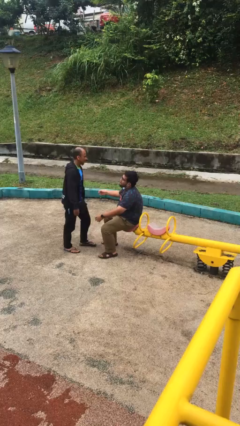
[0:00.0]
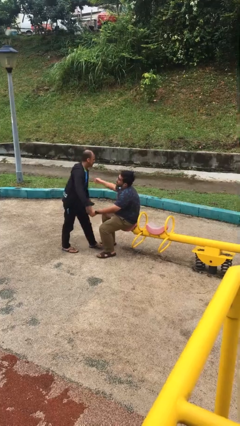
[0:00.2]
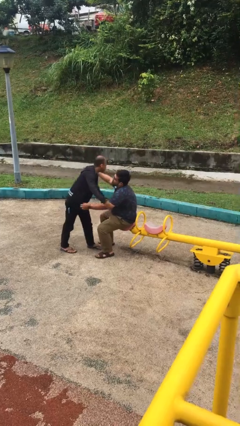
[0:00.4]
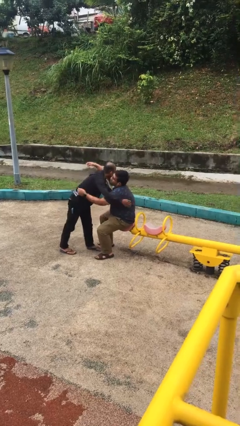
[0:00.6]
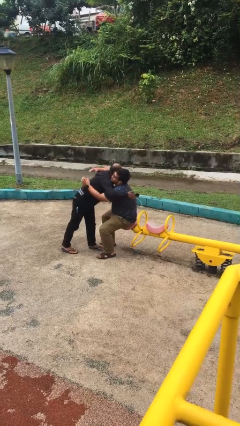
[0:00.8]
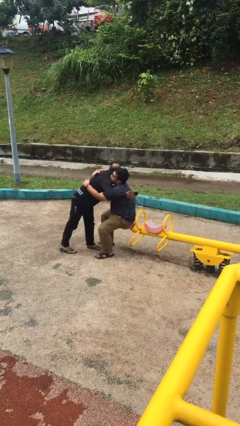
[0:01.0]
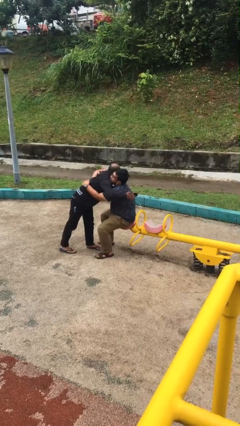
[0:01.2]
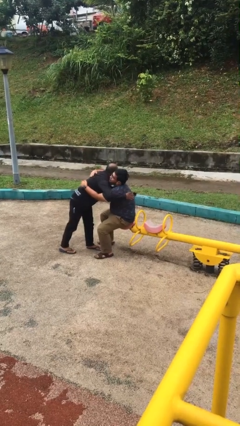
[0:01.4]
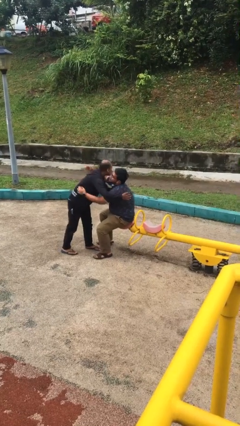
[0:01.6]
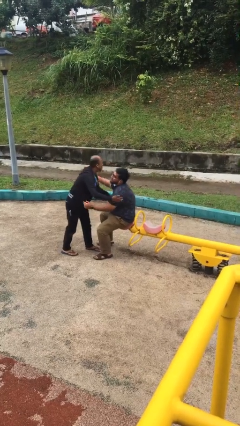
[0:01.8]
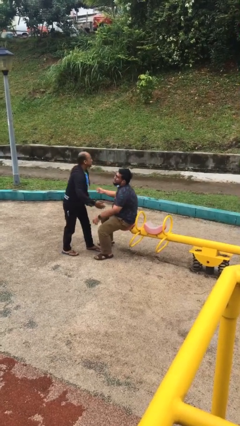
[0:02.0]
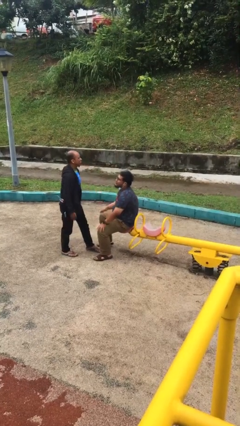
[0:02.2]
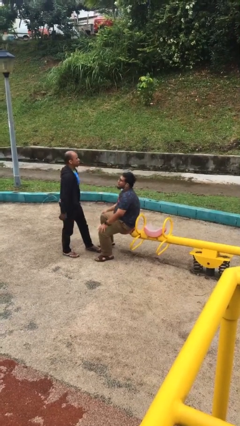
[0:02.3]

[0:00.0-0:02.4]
person embraces person

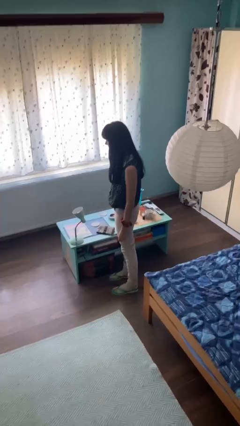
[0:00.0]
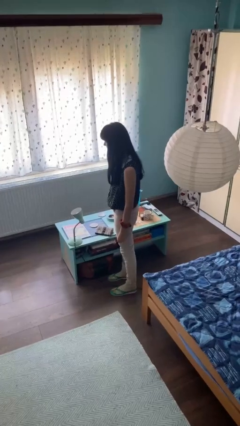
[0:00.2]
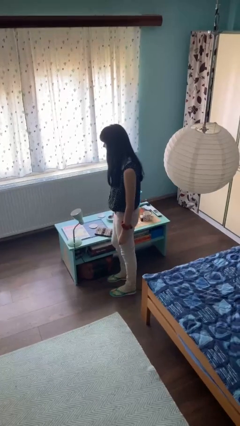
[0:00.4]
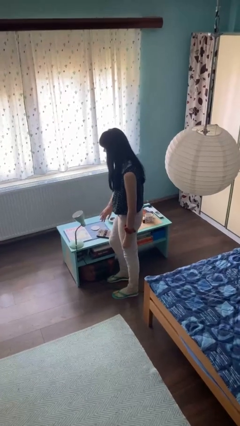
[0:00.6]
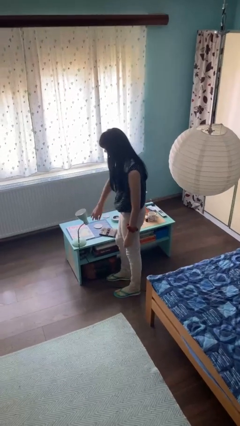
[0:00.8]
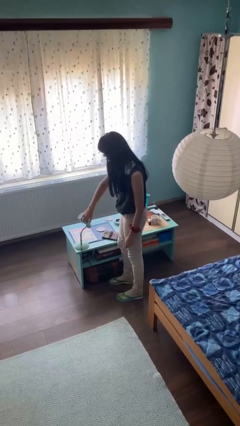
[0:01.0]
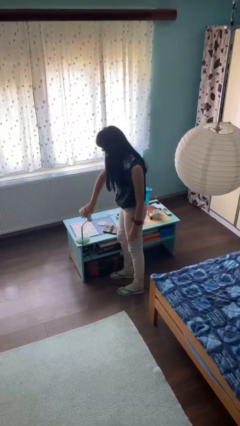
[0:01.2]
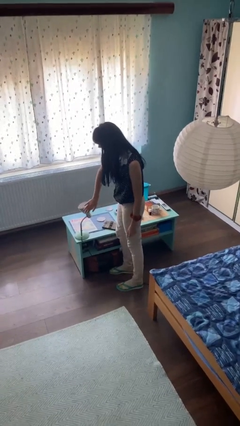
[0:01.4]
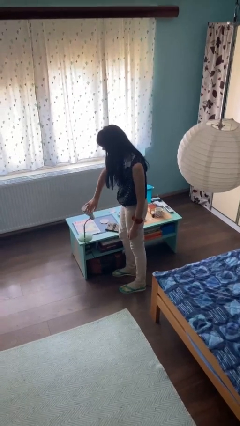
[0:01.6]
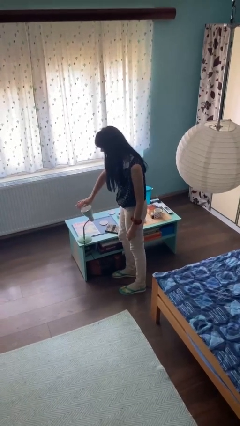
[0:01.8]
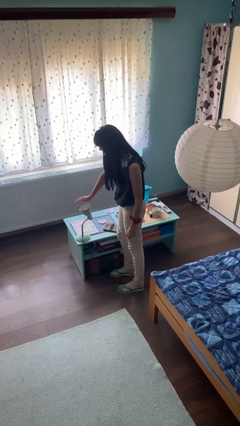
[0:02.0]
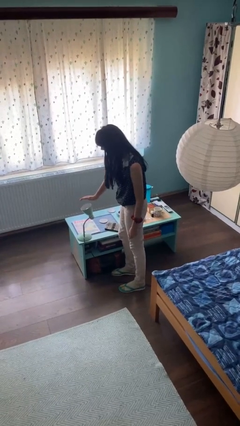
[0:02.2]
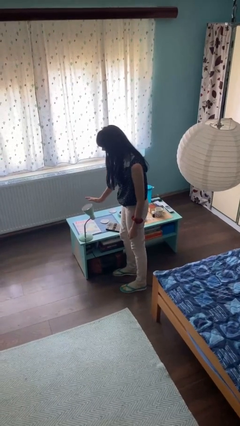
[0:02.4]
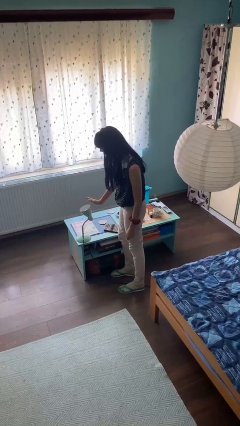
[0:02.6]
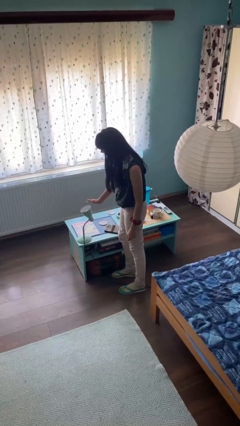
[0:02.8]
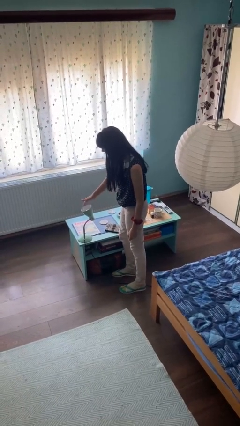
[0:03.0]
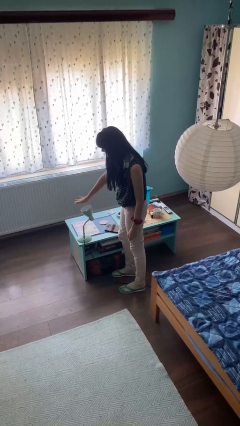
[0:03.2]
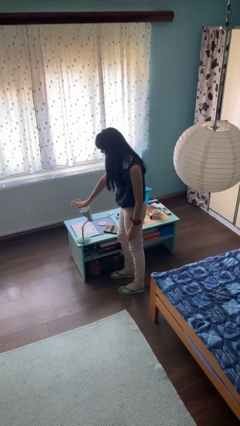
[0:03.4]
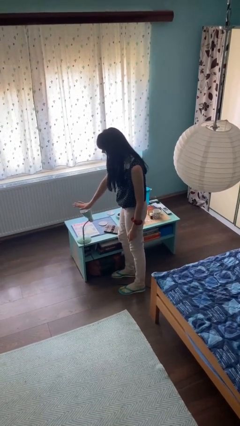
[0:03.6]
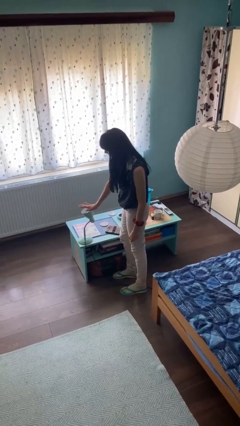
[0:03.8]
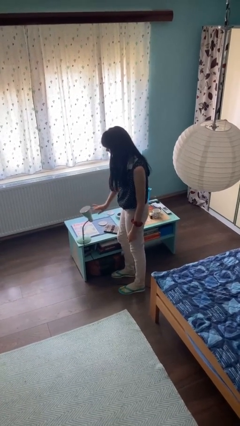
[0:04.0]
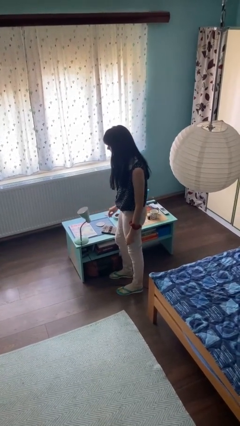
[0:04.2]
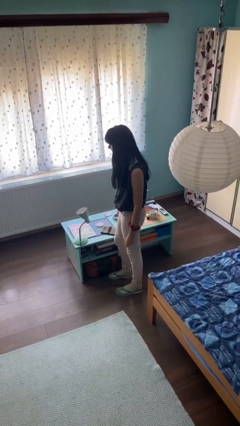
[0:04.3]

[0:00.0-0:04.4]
person waves hand over object

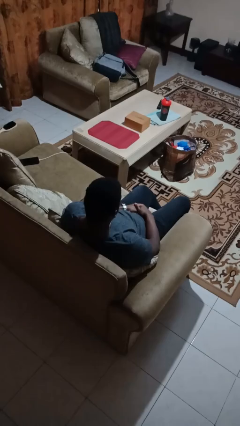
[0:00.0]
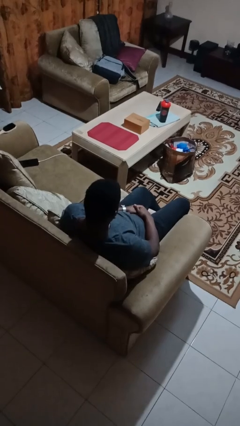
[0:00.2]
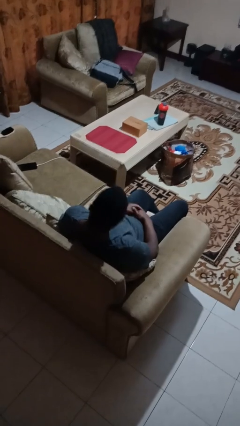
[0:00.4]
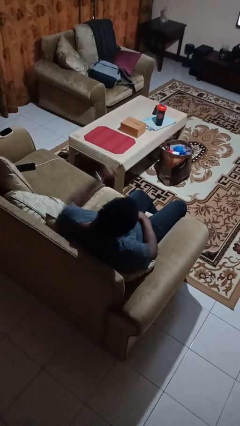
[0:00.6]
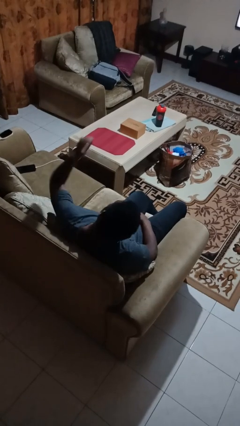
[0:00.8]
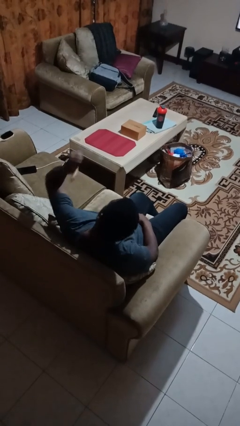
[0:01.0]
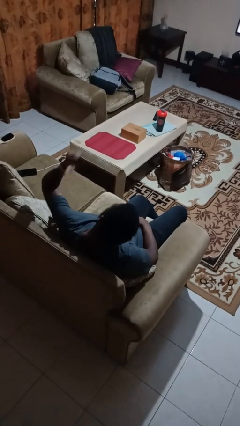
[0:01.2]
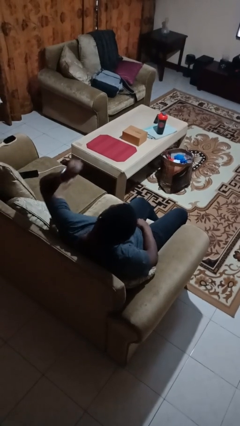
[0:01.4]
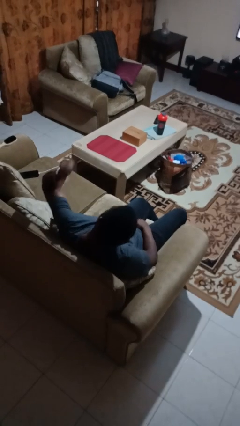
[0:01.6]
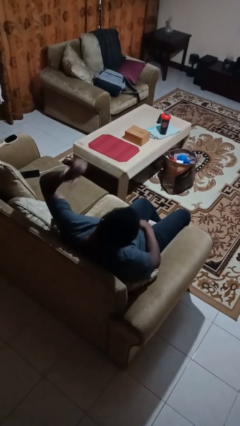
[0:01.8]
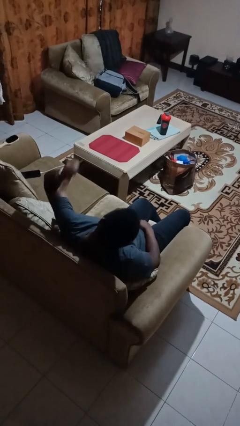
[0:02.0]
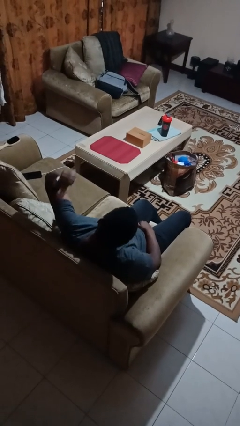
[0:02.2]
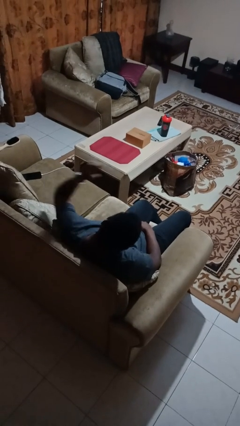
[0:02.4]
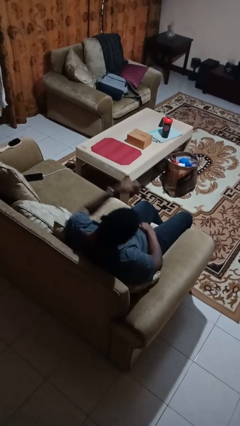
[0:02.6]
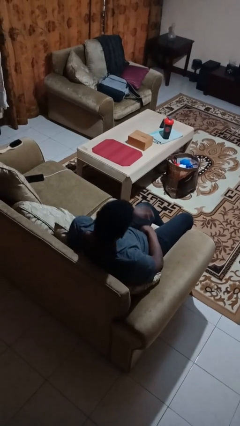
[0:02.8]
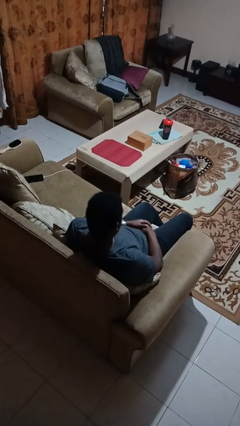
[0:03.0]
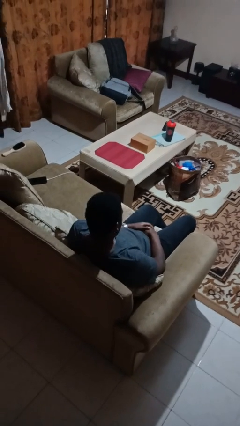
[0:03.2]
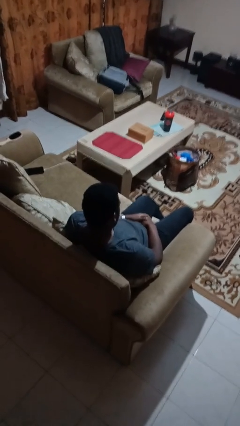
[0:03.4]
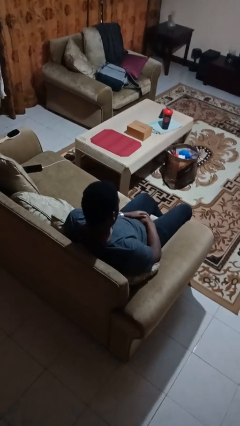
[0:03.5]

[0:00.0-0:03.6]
person gestures behind me

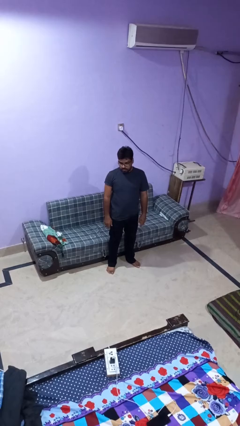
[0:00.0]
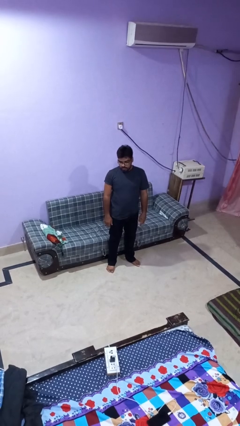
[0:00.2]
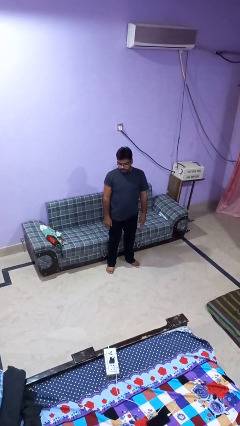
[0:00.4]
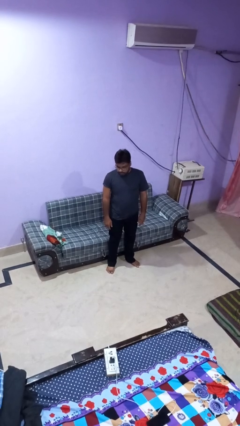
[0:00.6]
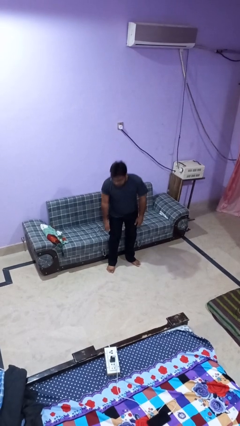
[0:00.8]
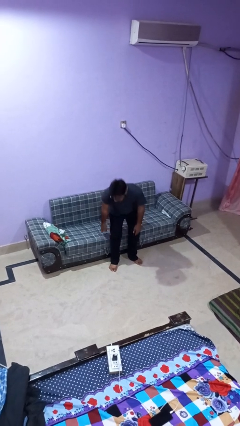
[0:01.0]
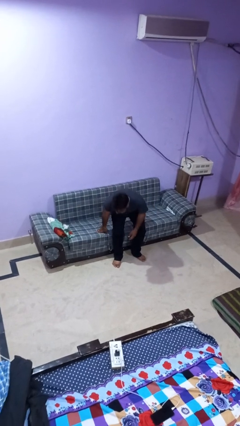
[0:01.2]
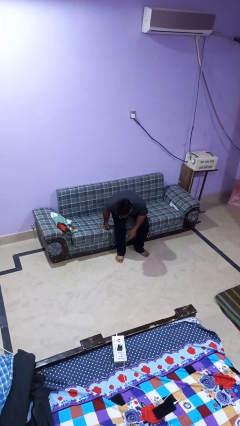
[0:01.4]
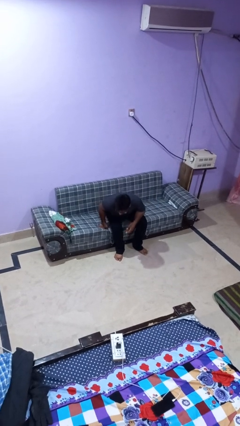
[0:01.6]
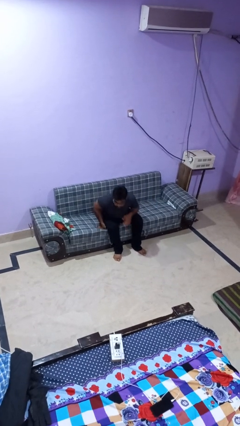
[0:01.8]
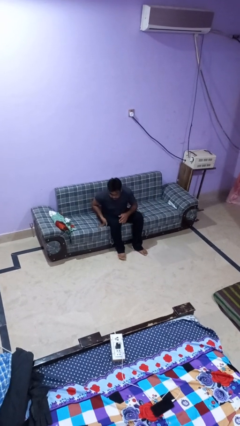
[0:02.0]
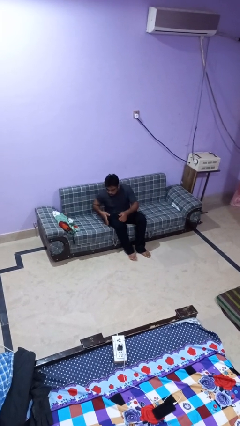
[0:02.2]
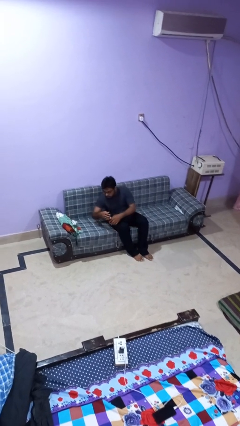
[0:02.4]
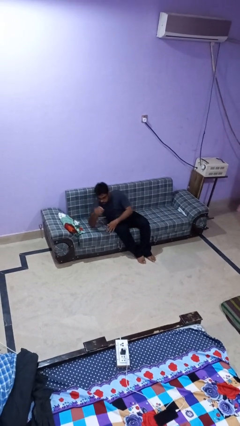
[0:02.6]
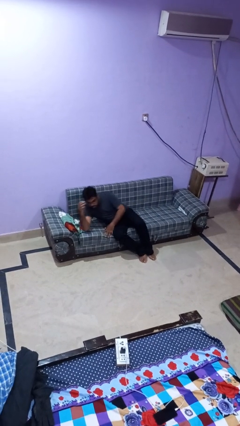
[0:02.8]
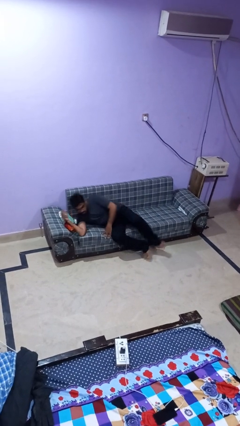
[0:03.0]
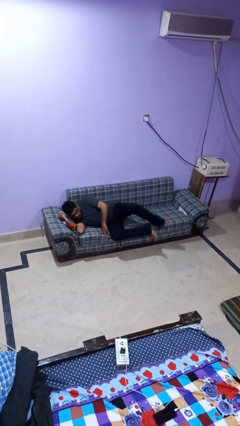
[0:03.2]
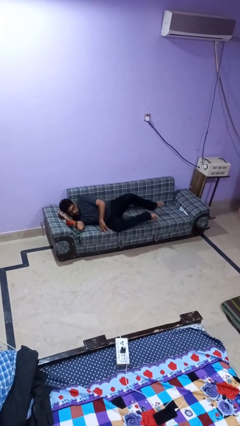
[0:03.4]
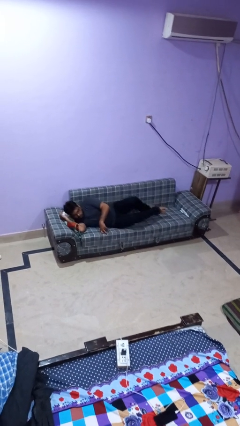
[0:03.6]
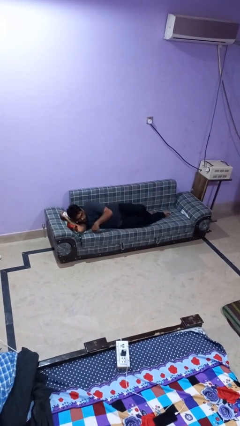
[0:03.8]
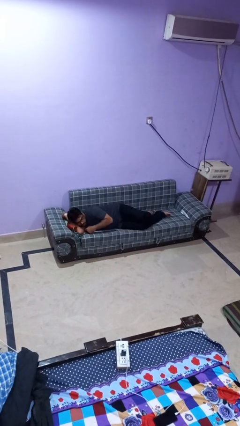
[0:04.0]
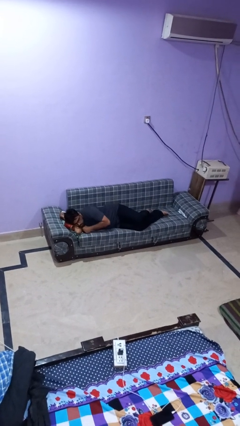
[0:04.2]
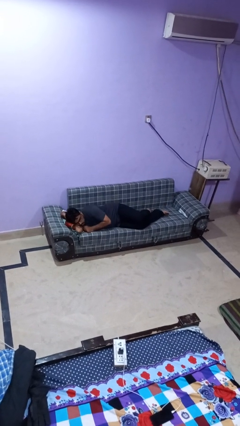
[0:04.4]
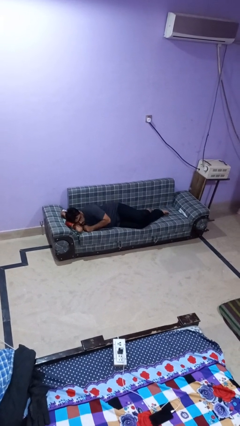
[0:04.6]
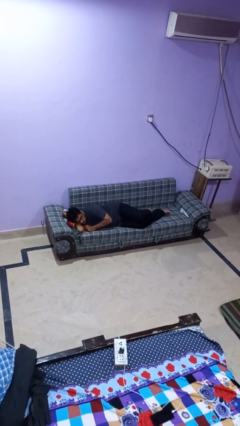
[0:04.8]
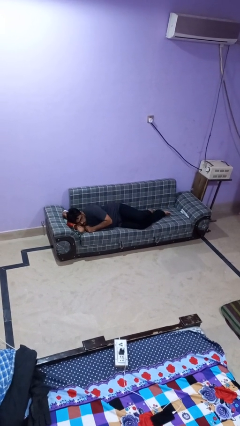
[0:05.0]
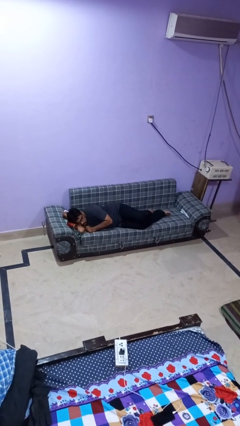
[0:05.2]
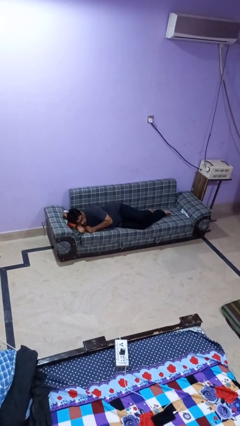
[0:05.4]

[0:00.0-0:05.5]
person lies down on couch

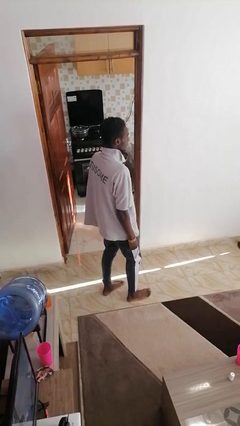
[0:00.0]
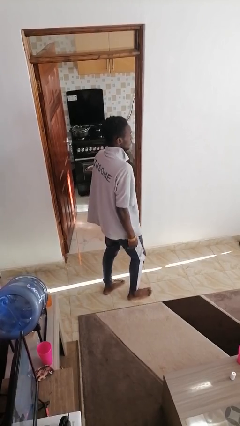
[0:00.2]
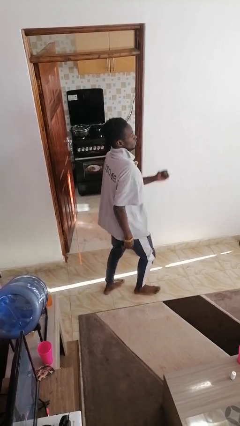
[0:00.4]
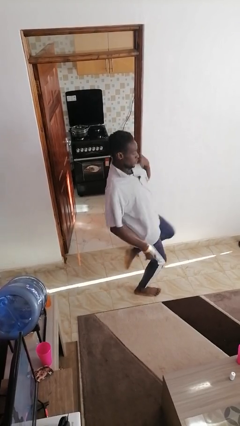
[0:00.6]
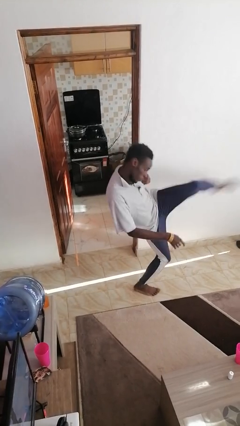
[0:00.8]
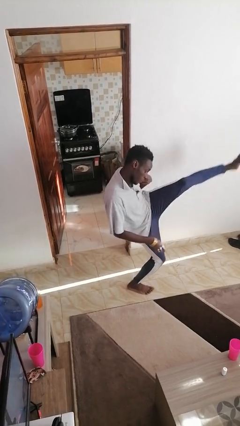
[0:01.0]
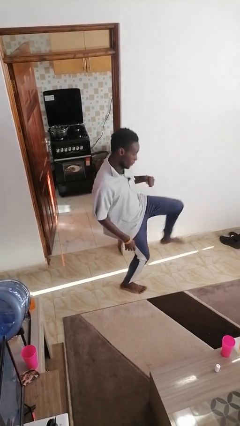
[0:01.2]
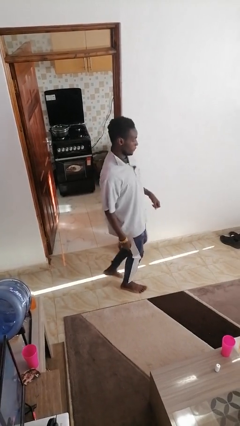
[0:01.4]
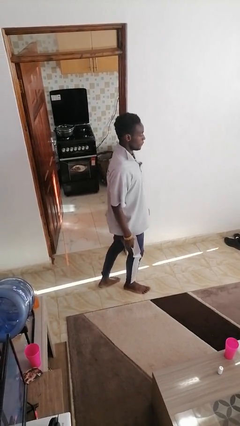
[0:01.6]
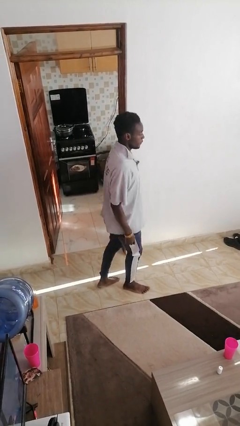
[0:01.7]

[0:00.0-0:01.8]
person karate kicks
